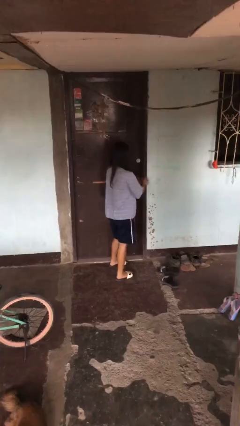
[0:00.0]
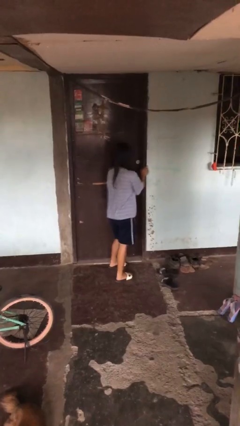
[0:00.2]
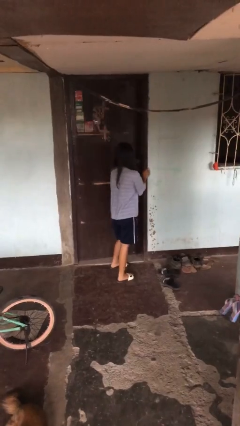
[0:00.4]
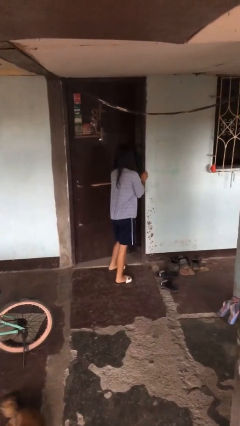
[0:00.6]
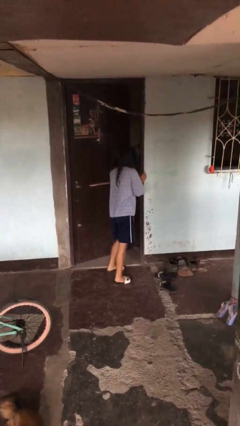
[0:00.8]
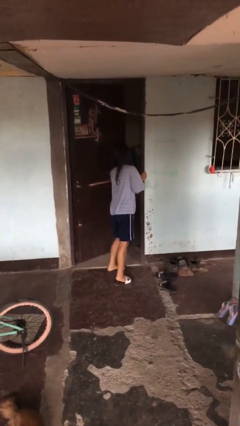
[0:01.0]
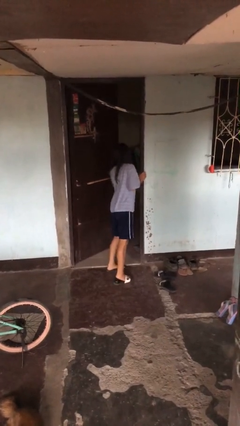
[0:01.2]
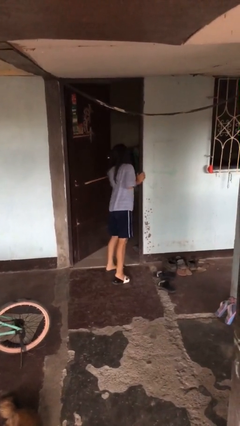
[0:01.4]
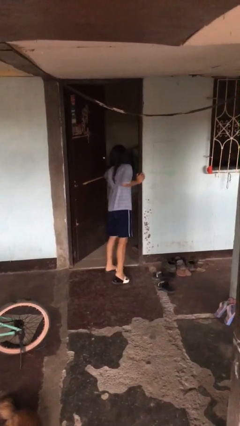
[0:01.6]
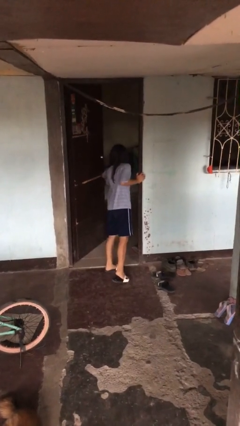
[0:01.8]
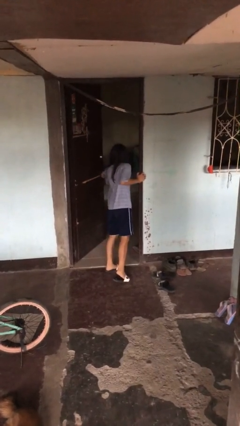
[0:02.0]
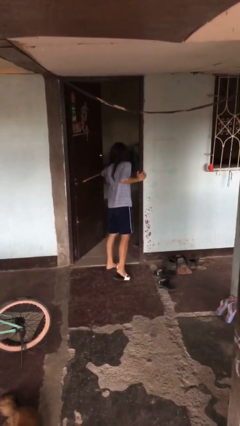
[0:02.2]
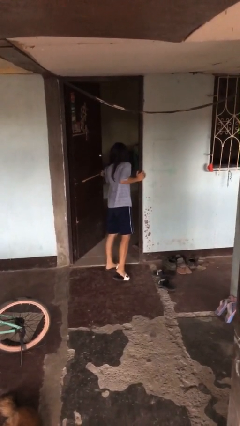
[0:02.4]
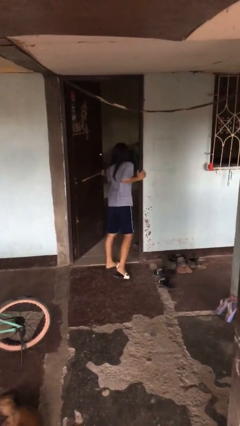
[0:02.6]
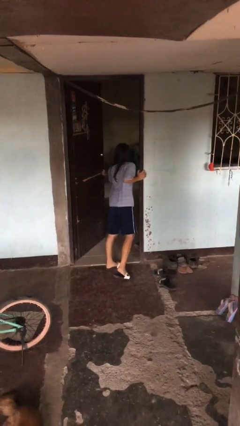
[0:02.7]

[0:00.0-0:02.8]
person opens facility door

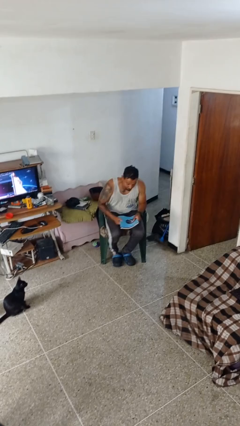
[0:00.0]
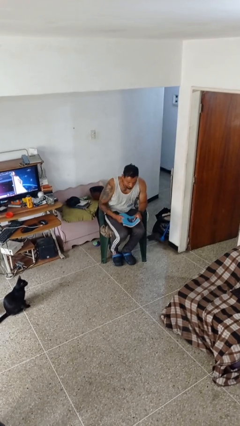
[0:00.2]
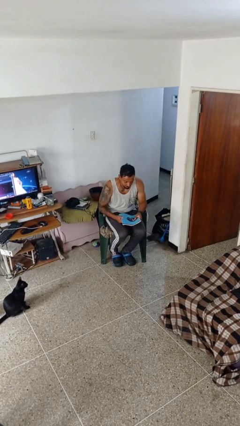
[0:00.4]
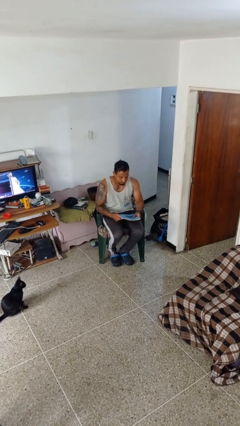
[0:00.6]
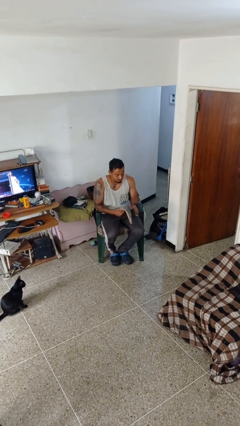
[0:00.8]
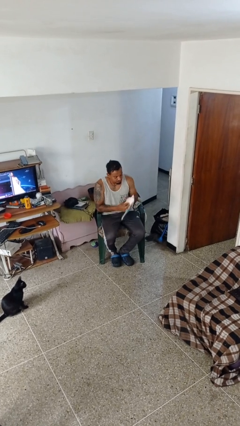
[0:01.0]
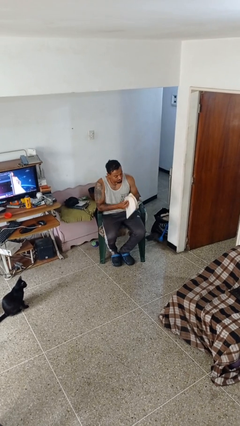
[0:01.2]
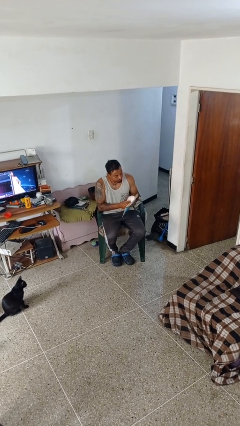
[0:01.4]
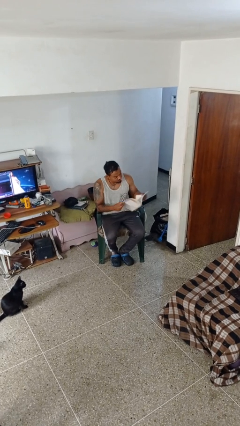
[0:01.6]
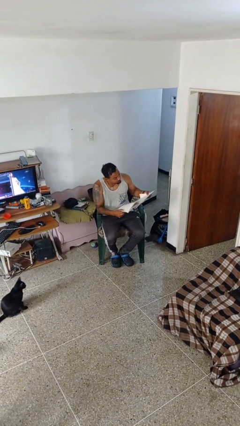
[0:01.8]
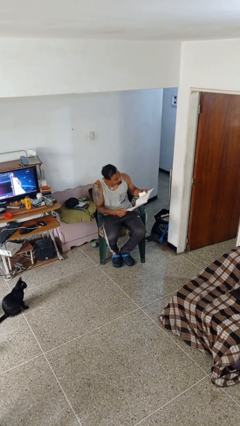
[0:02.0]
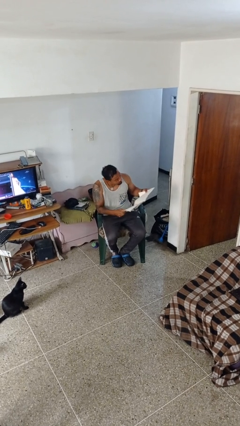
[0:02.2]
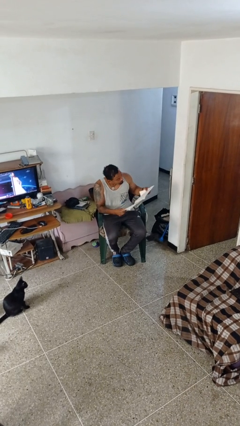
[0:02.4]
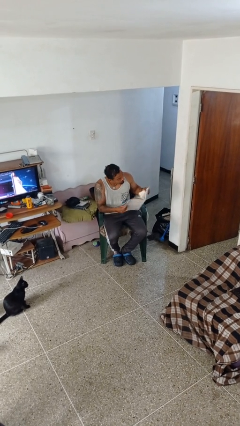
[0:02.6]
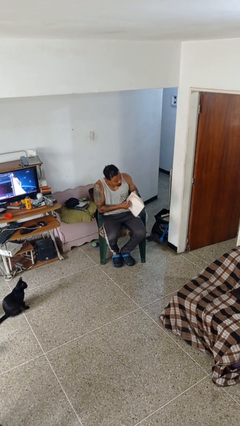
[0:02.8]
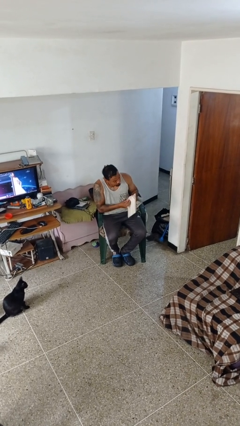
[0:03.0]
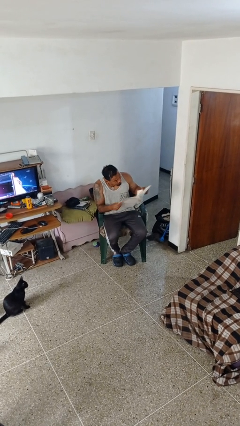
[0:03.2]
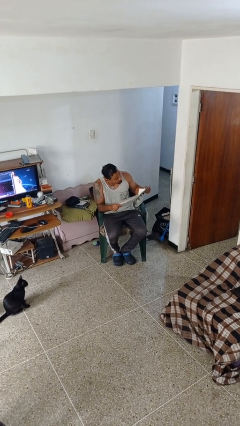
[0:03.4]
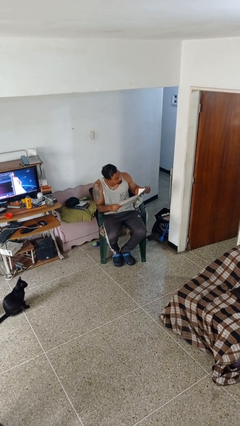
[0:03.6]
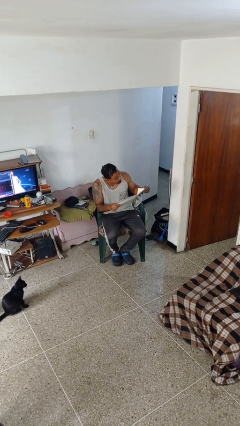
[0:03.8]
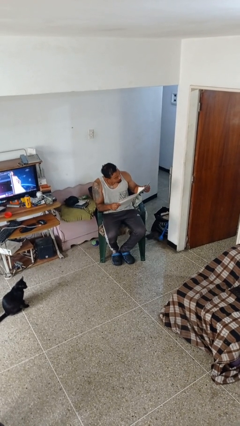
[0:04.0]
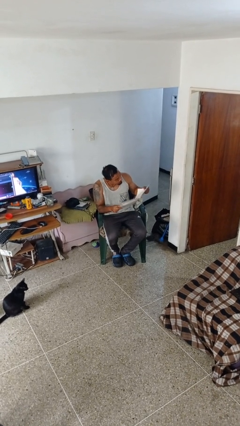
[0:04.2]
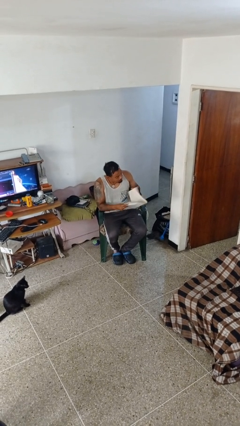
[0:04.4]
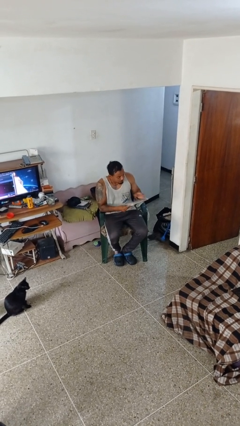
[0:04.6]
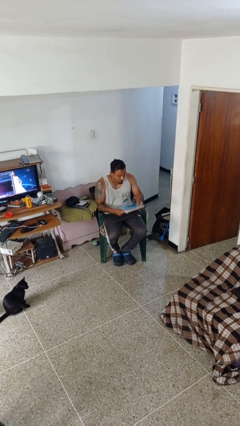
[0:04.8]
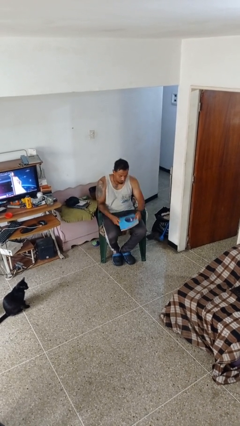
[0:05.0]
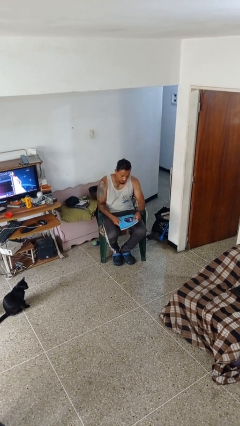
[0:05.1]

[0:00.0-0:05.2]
person reads magazine

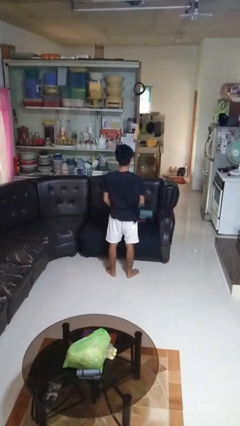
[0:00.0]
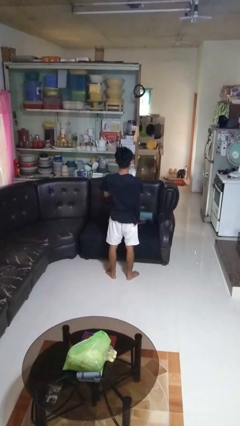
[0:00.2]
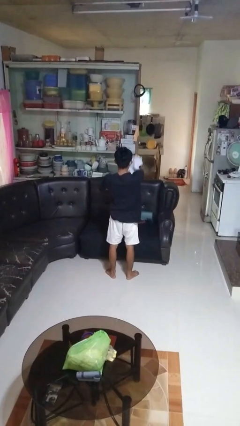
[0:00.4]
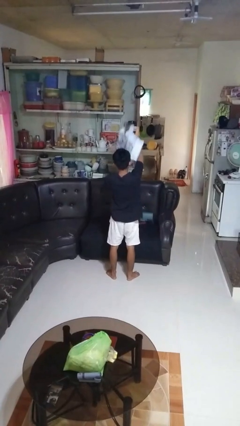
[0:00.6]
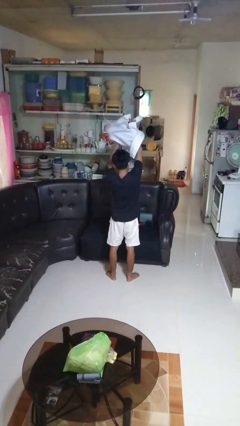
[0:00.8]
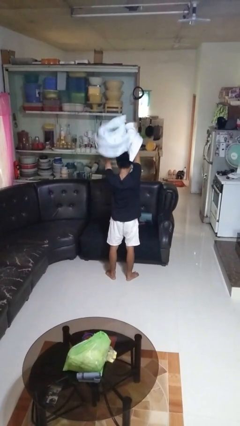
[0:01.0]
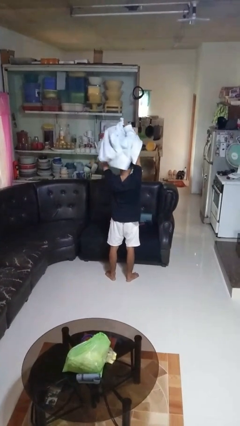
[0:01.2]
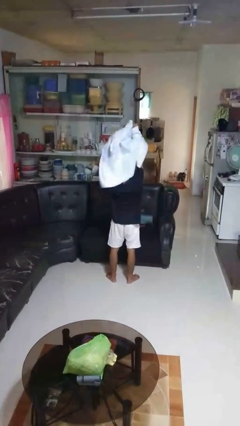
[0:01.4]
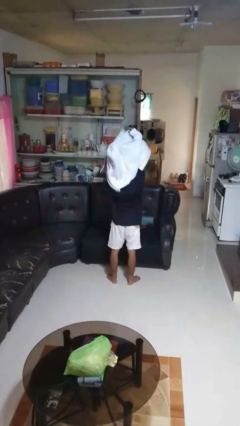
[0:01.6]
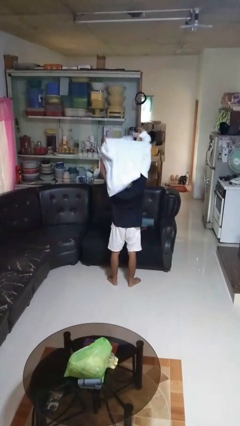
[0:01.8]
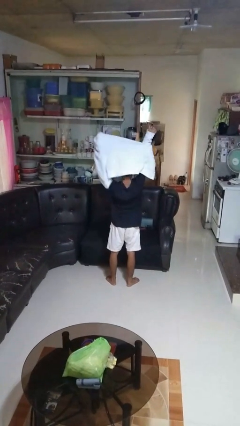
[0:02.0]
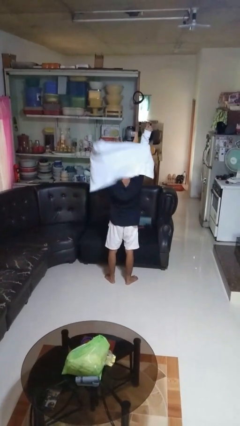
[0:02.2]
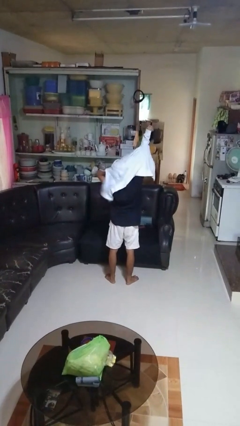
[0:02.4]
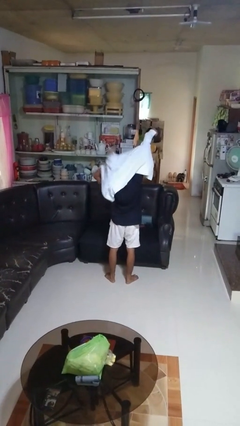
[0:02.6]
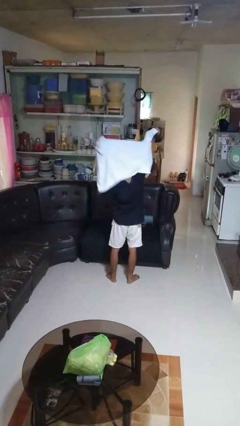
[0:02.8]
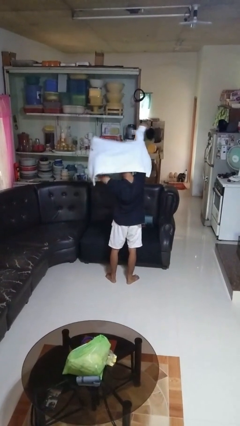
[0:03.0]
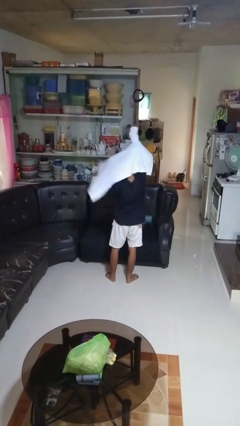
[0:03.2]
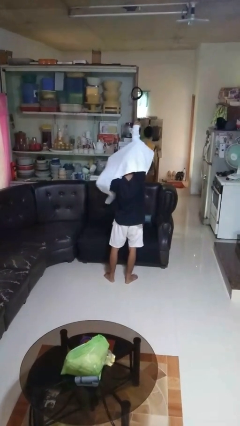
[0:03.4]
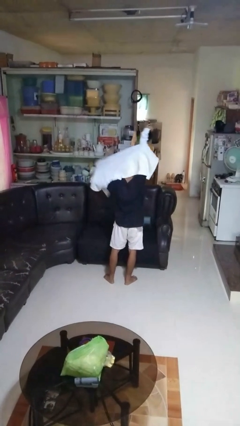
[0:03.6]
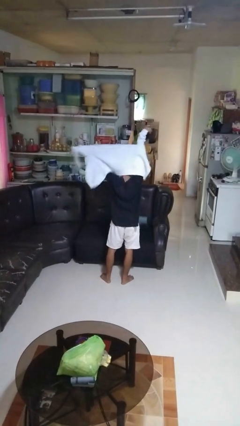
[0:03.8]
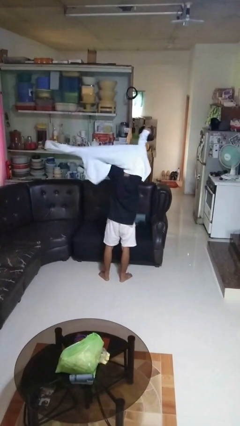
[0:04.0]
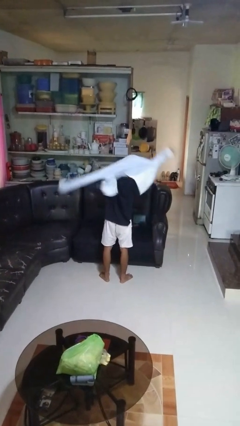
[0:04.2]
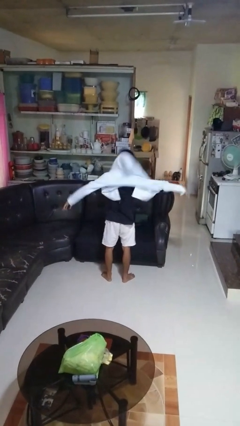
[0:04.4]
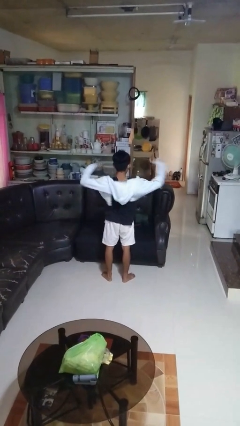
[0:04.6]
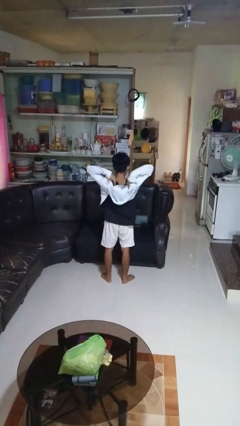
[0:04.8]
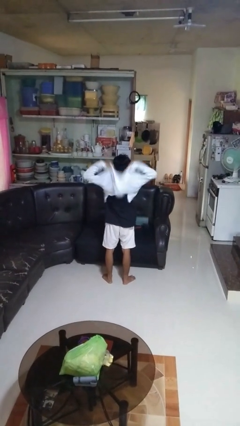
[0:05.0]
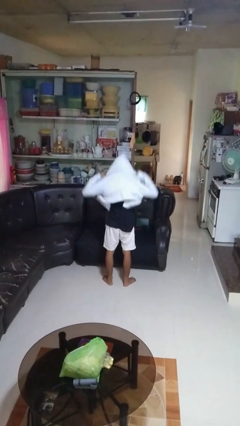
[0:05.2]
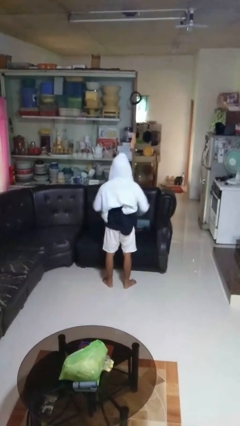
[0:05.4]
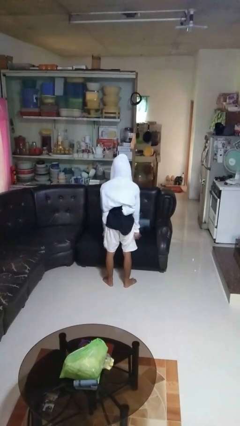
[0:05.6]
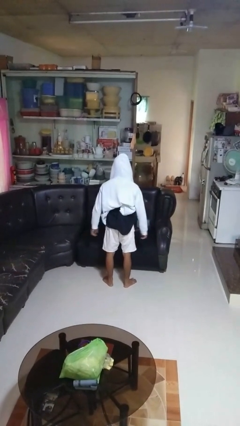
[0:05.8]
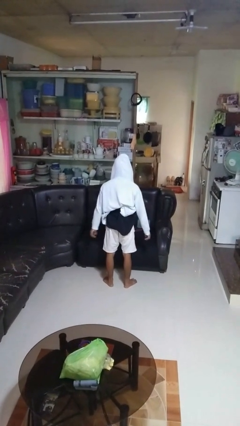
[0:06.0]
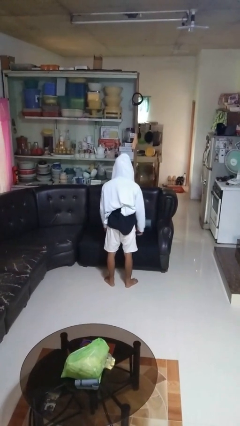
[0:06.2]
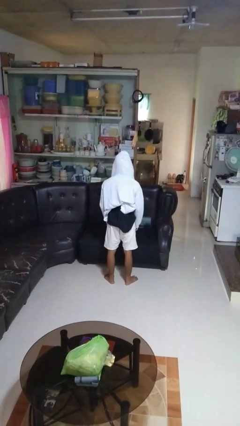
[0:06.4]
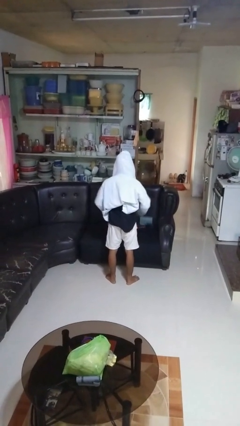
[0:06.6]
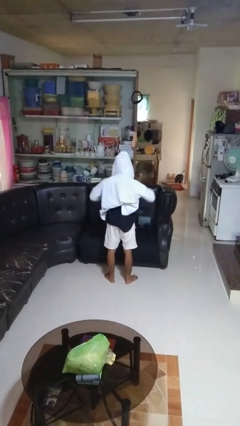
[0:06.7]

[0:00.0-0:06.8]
person puts on hoodie

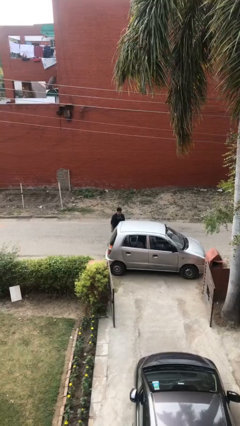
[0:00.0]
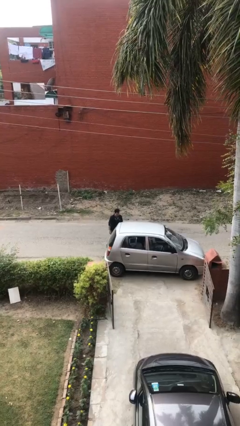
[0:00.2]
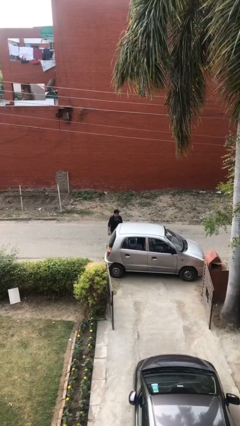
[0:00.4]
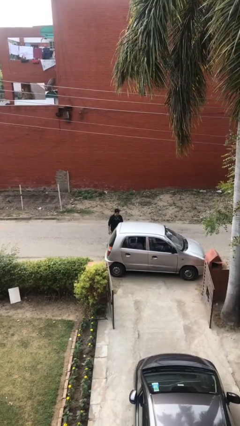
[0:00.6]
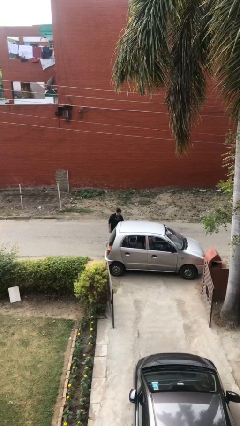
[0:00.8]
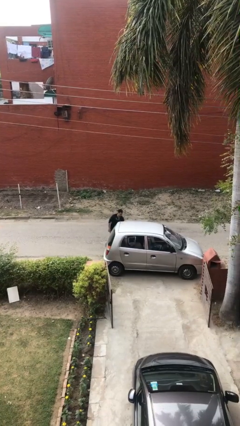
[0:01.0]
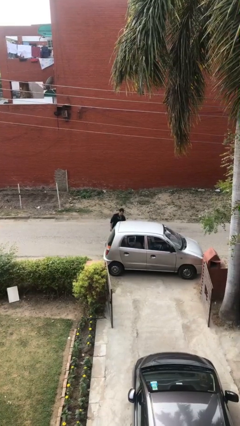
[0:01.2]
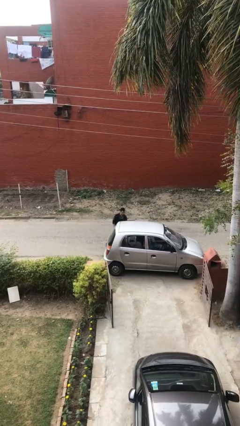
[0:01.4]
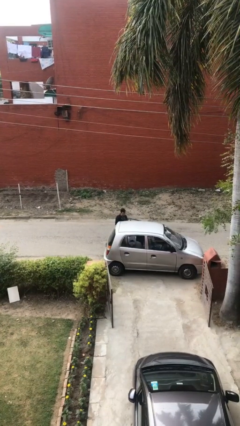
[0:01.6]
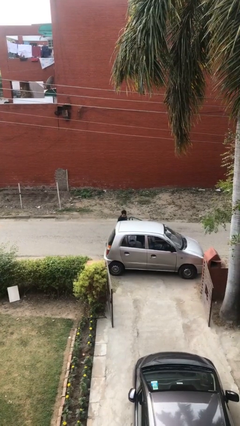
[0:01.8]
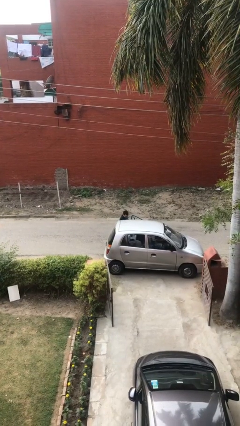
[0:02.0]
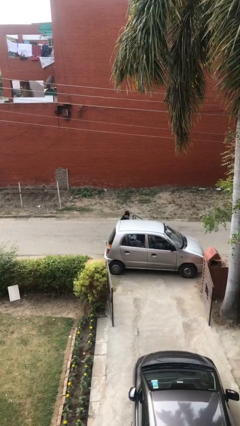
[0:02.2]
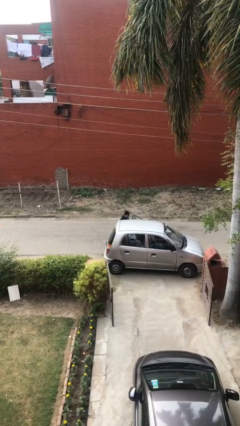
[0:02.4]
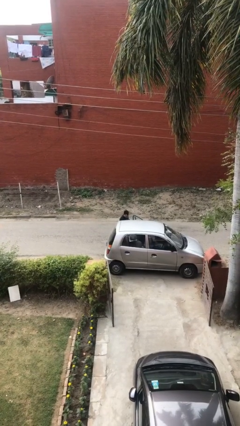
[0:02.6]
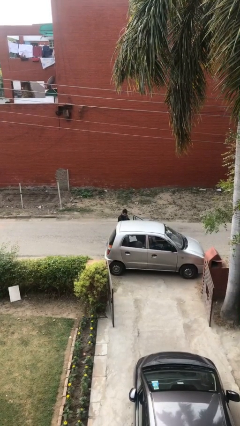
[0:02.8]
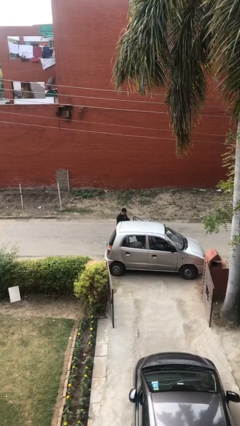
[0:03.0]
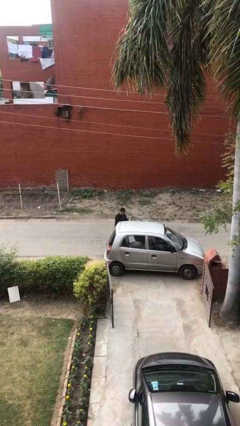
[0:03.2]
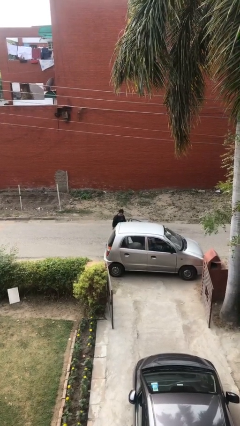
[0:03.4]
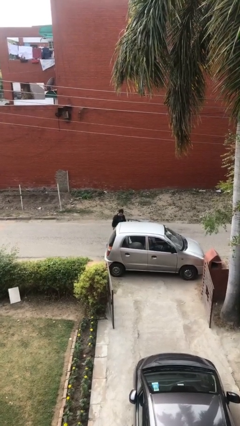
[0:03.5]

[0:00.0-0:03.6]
person unloads car
